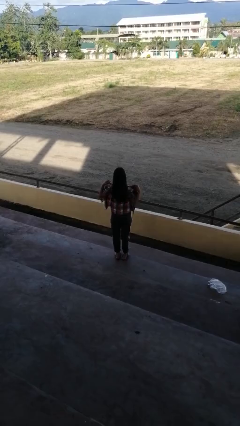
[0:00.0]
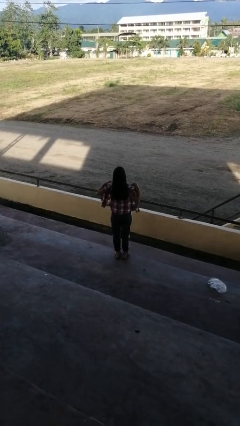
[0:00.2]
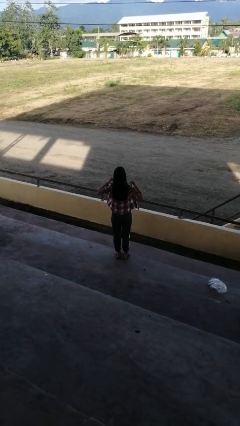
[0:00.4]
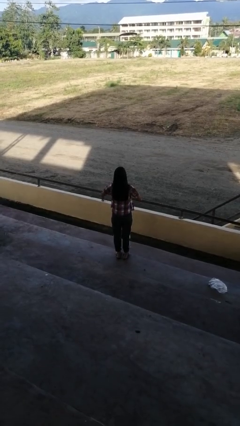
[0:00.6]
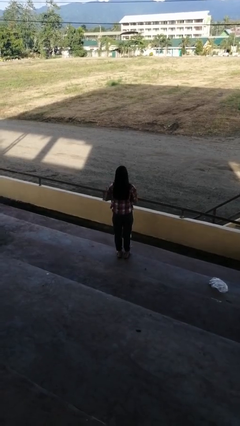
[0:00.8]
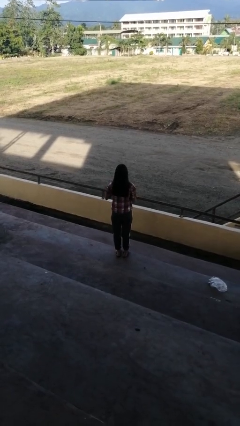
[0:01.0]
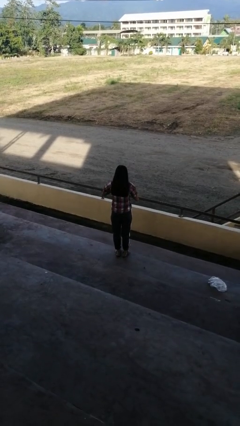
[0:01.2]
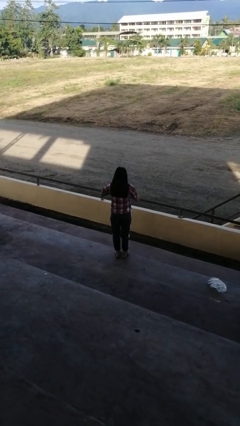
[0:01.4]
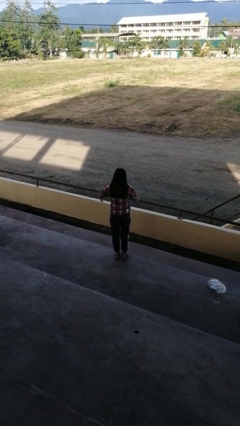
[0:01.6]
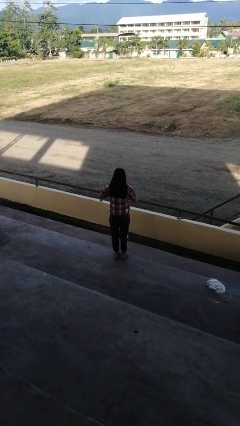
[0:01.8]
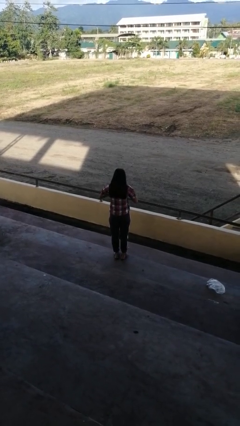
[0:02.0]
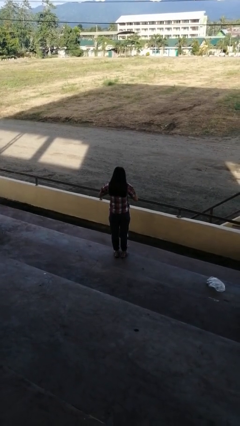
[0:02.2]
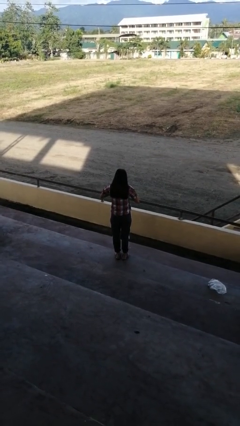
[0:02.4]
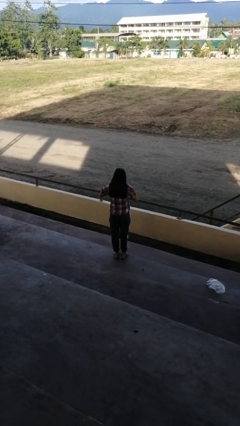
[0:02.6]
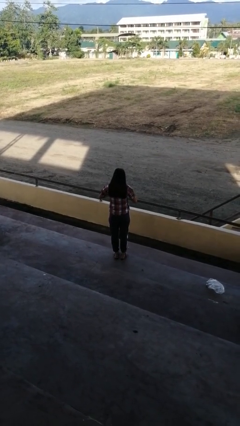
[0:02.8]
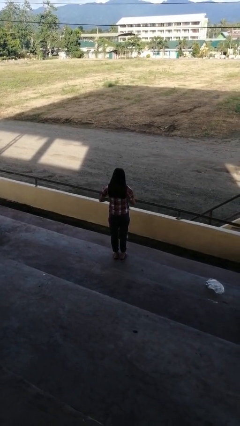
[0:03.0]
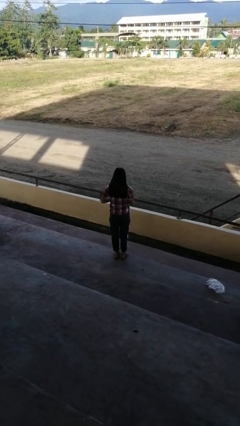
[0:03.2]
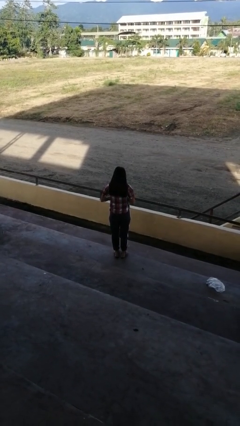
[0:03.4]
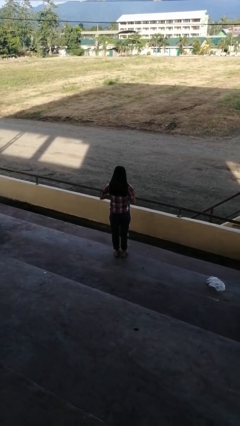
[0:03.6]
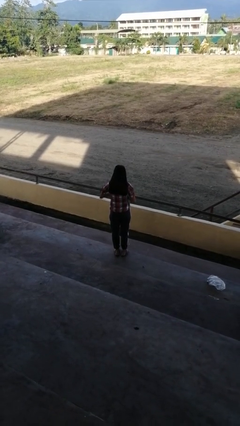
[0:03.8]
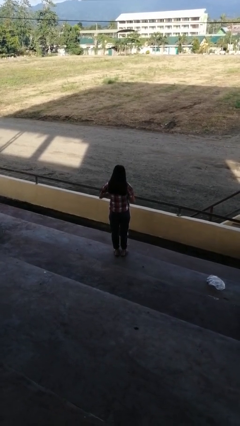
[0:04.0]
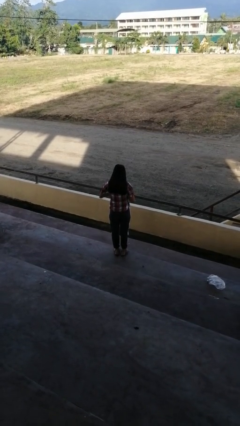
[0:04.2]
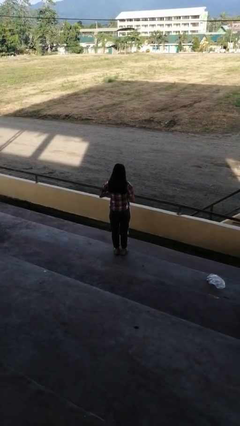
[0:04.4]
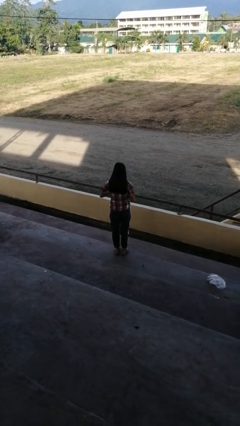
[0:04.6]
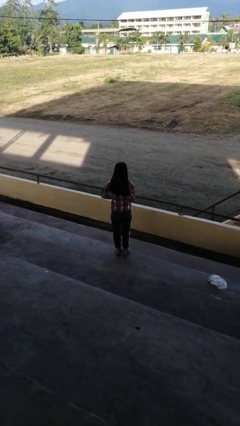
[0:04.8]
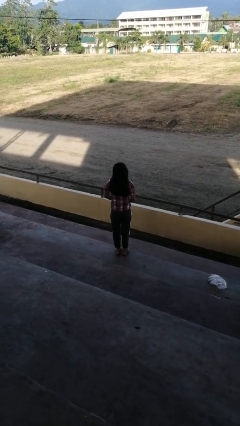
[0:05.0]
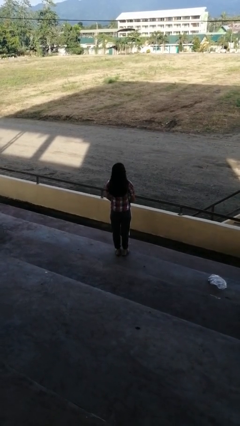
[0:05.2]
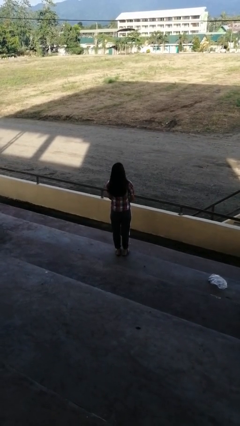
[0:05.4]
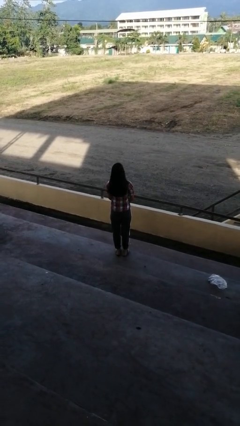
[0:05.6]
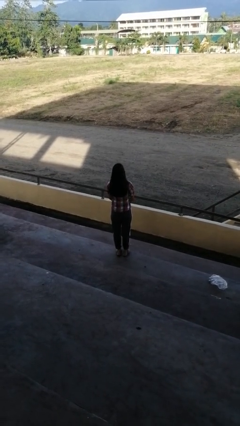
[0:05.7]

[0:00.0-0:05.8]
person buttons shirt

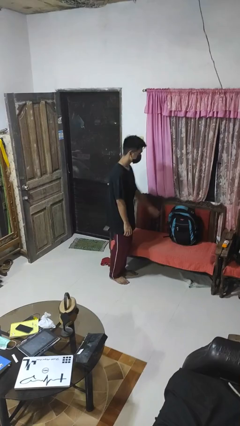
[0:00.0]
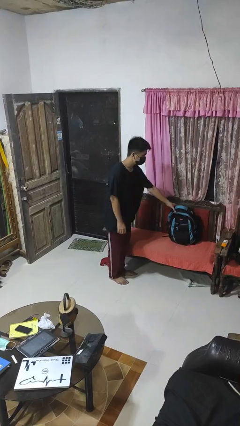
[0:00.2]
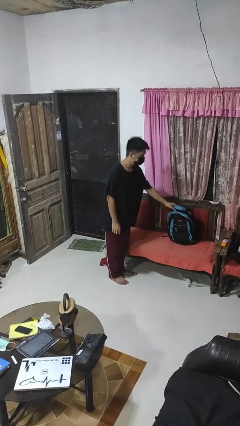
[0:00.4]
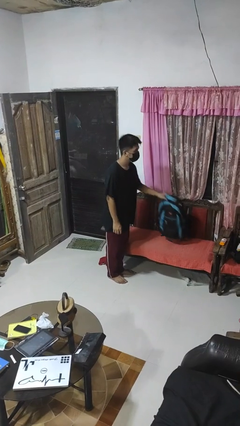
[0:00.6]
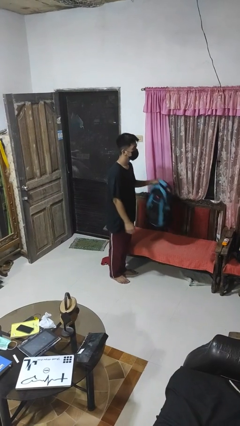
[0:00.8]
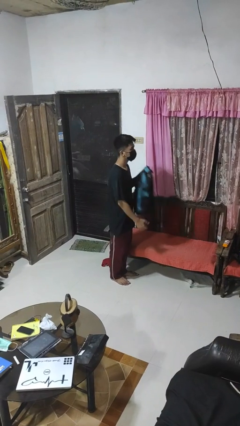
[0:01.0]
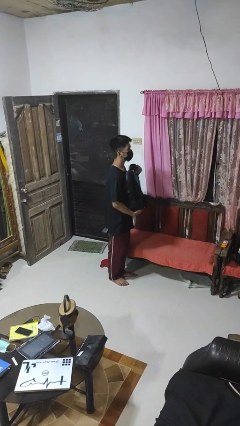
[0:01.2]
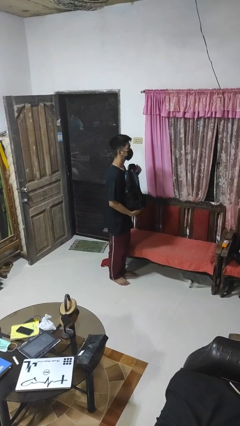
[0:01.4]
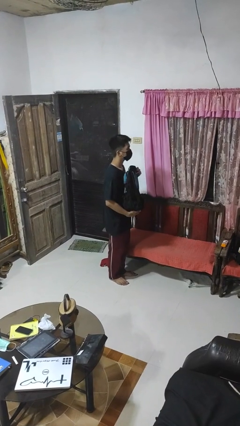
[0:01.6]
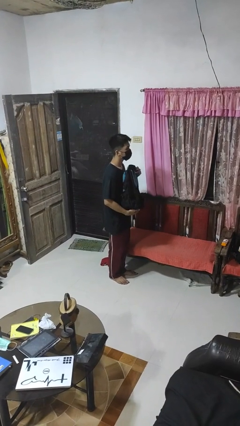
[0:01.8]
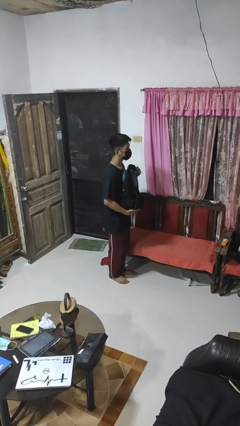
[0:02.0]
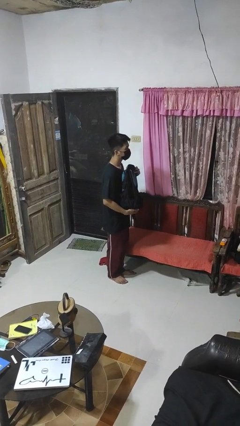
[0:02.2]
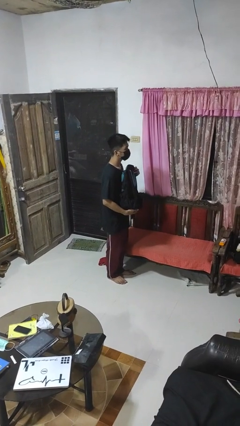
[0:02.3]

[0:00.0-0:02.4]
person picks up object from couch

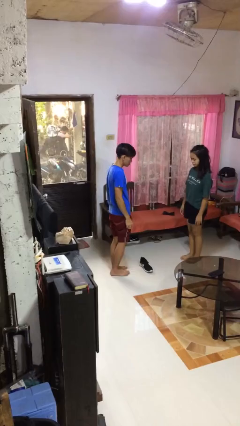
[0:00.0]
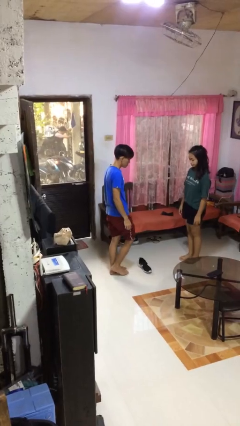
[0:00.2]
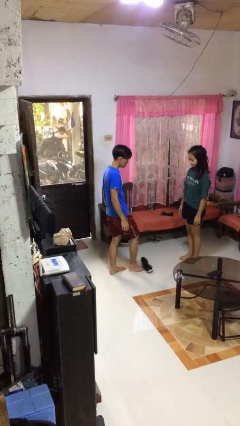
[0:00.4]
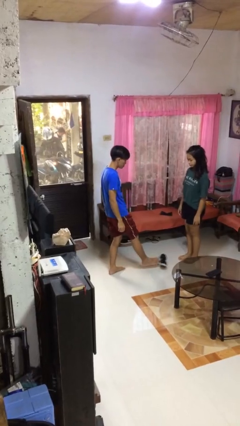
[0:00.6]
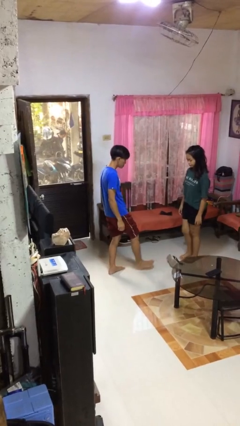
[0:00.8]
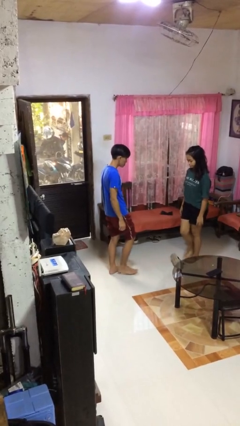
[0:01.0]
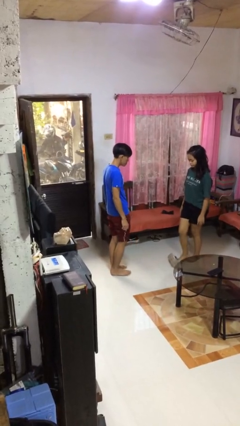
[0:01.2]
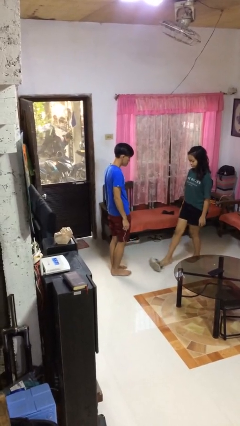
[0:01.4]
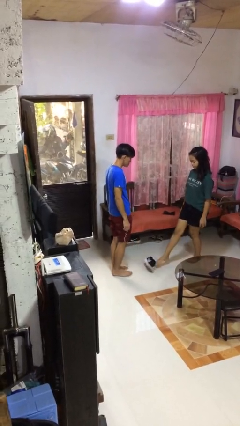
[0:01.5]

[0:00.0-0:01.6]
person kicks object to person

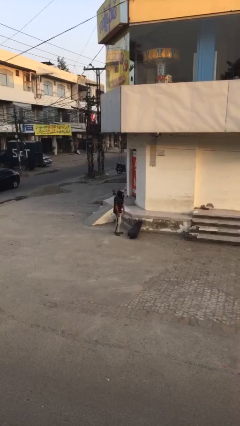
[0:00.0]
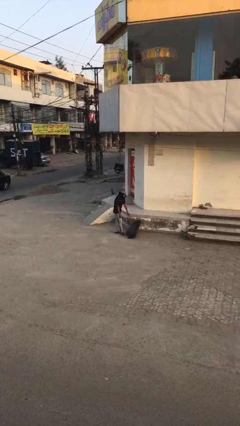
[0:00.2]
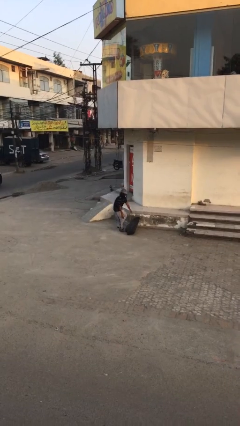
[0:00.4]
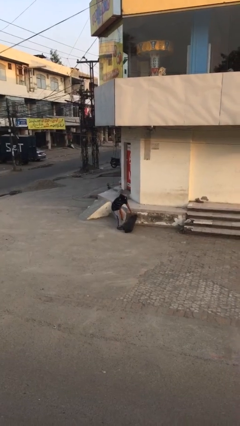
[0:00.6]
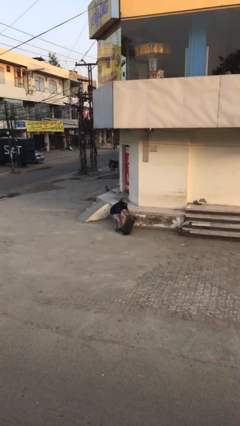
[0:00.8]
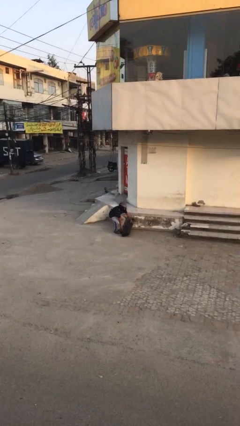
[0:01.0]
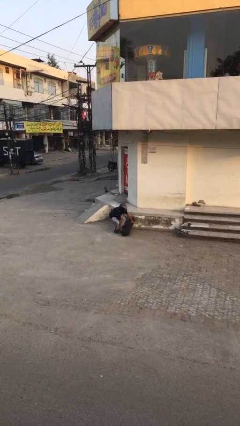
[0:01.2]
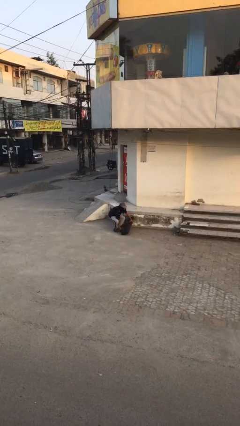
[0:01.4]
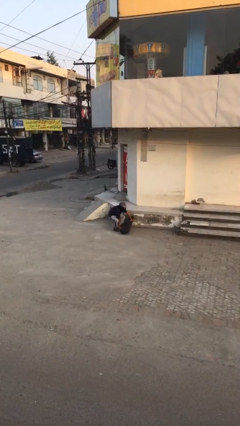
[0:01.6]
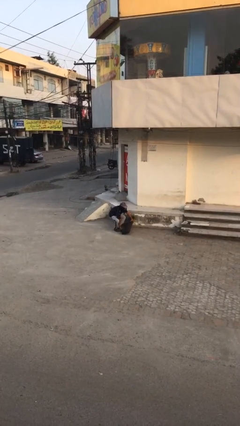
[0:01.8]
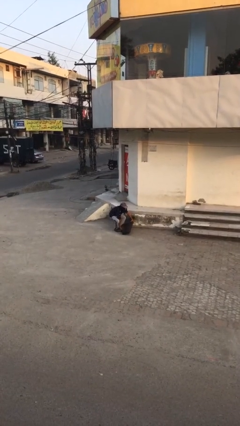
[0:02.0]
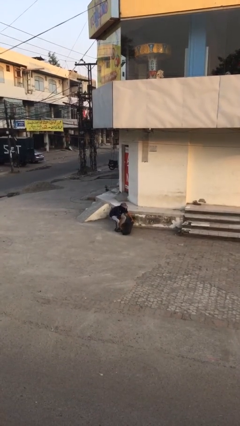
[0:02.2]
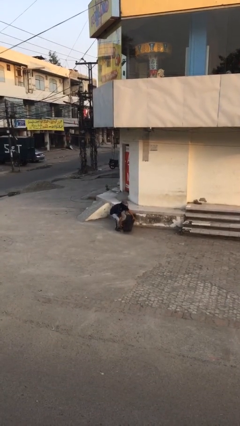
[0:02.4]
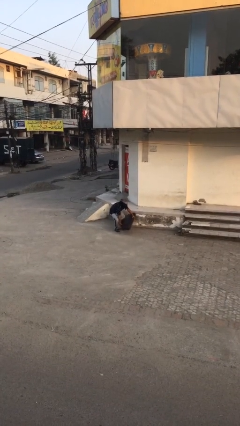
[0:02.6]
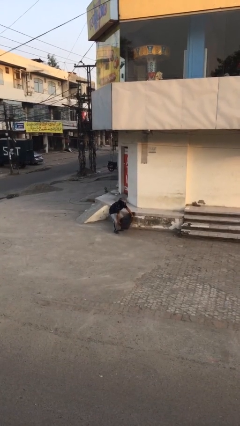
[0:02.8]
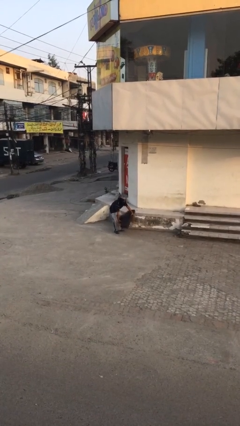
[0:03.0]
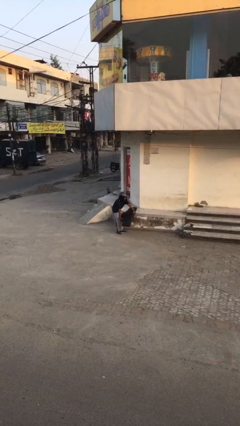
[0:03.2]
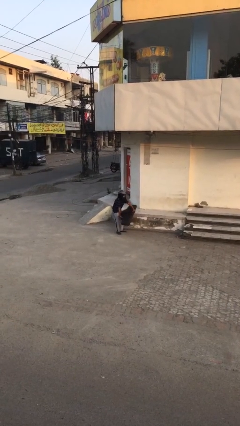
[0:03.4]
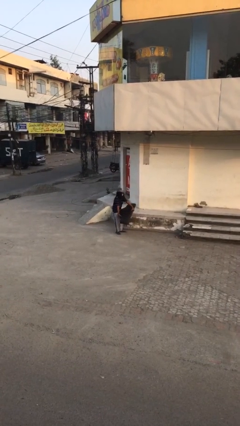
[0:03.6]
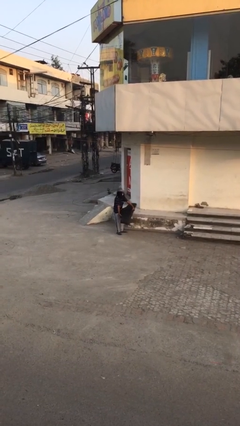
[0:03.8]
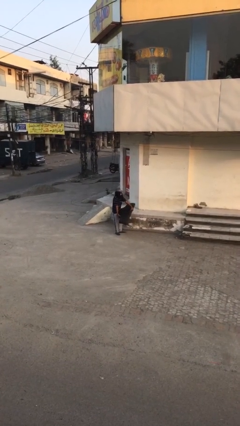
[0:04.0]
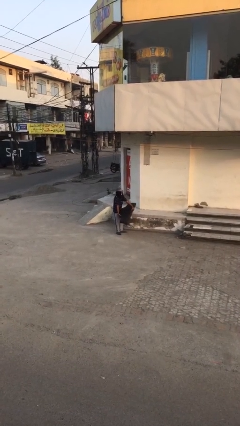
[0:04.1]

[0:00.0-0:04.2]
person picks up object from floor

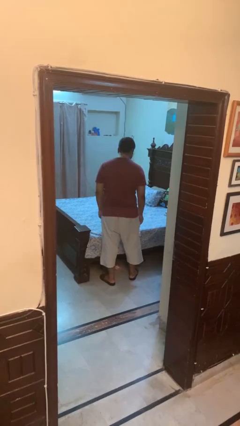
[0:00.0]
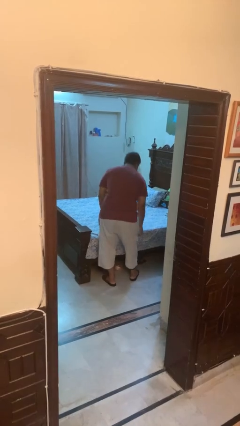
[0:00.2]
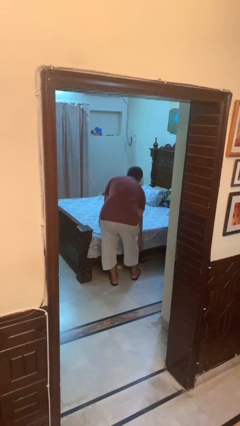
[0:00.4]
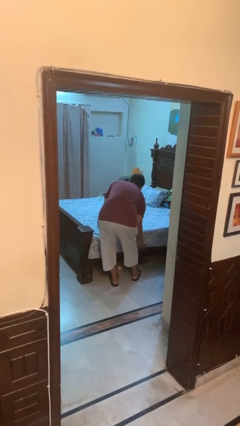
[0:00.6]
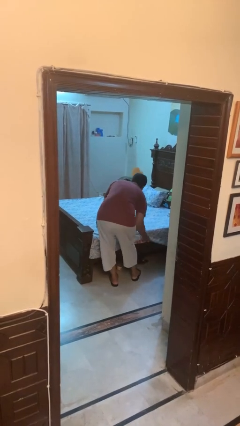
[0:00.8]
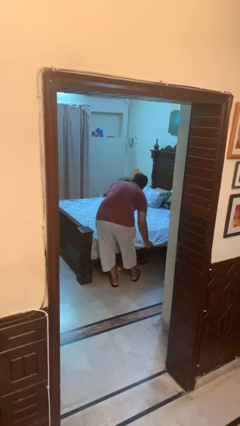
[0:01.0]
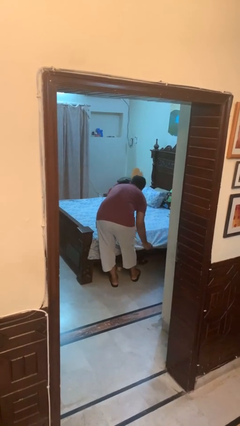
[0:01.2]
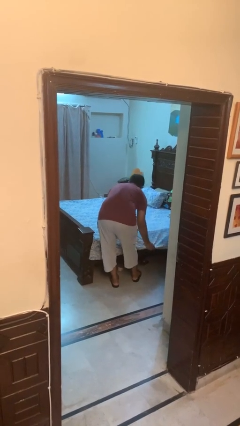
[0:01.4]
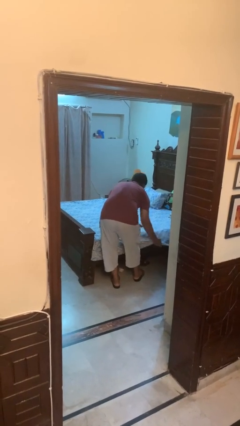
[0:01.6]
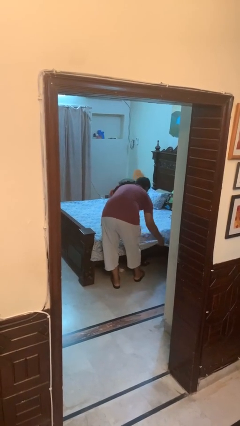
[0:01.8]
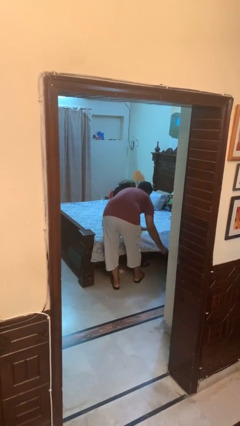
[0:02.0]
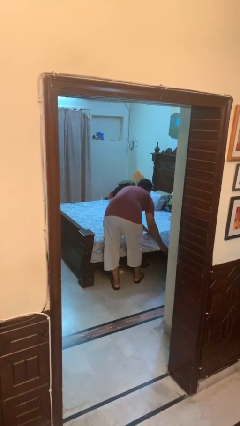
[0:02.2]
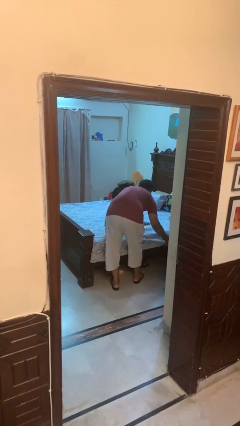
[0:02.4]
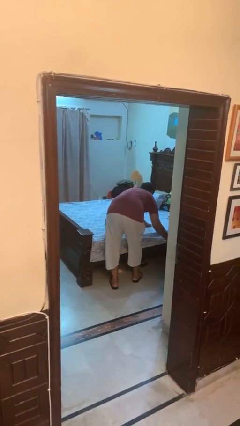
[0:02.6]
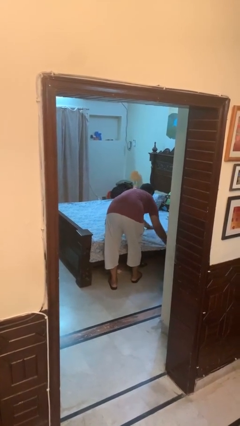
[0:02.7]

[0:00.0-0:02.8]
person makes bed

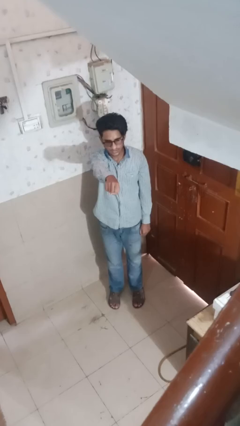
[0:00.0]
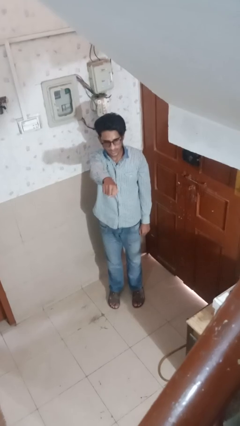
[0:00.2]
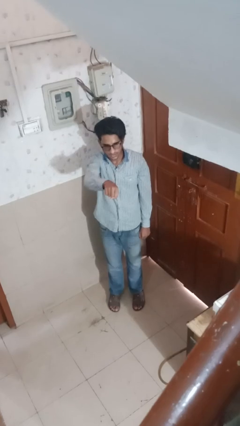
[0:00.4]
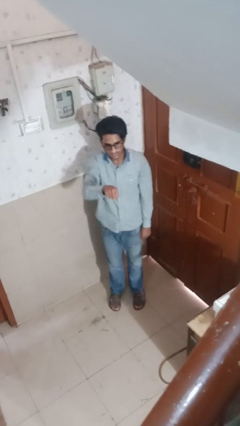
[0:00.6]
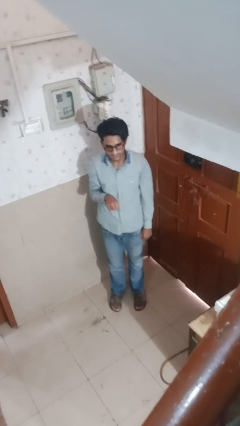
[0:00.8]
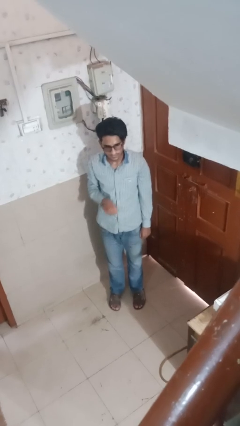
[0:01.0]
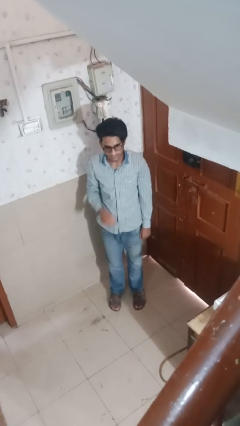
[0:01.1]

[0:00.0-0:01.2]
person punches
